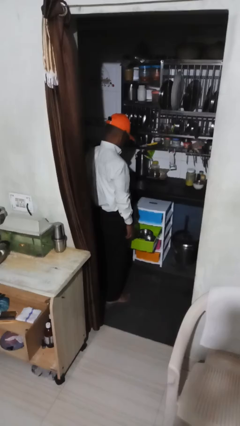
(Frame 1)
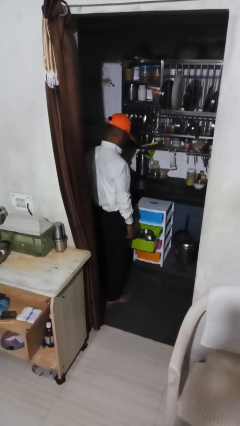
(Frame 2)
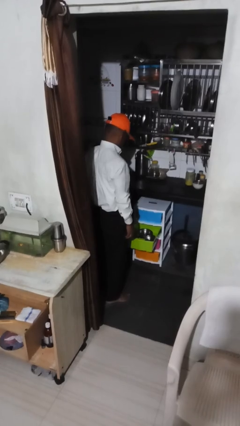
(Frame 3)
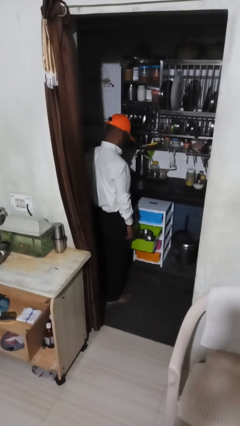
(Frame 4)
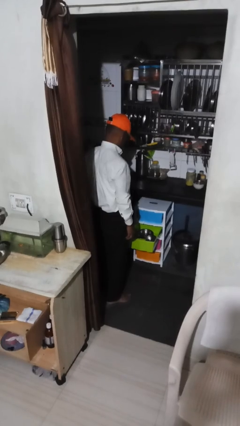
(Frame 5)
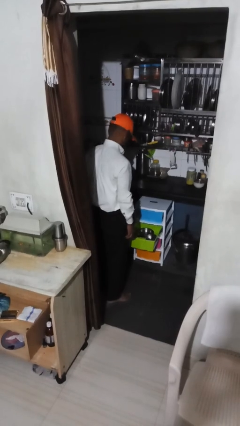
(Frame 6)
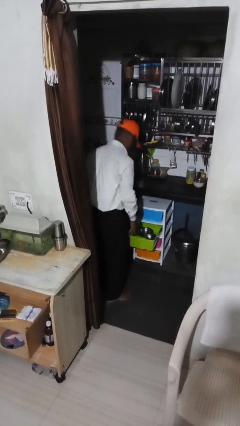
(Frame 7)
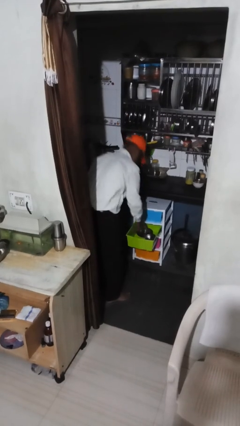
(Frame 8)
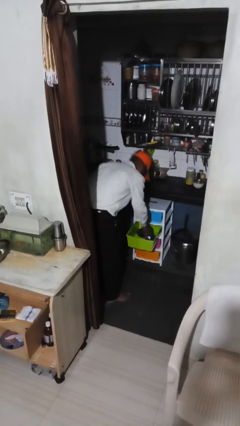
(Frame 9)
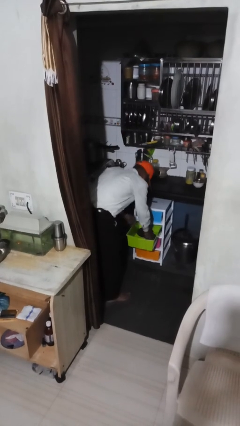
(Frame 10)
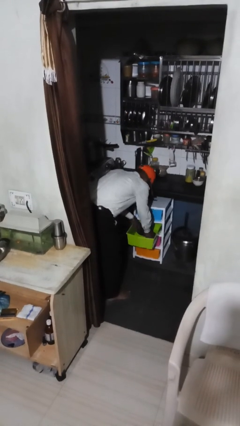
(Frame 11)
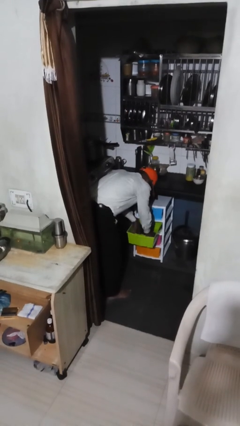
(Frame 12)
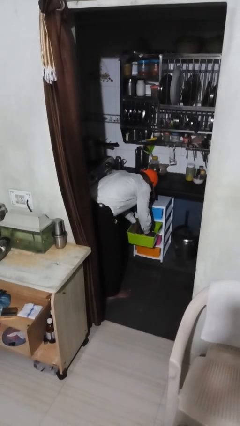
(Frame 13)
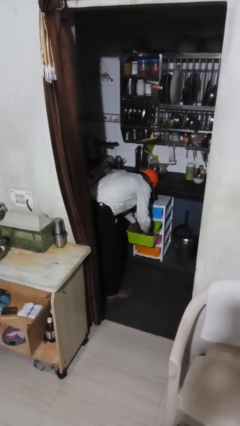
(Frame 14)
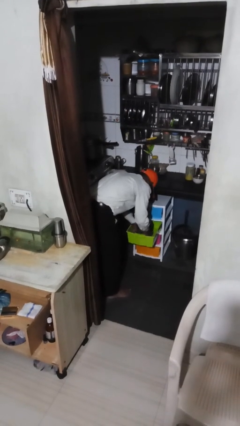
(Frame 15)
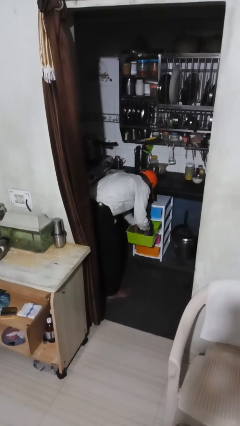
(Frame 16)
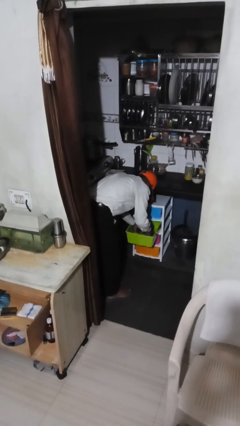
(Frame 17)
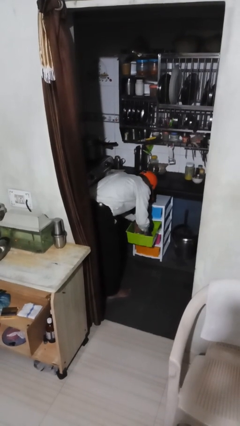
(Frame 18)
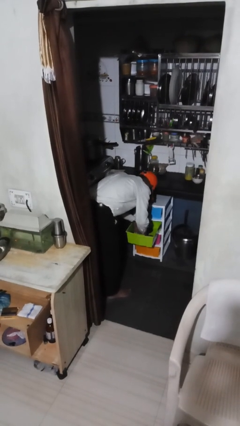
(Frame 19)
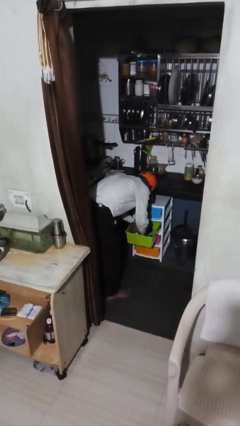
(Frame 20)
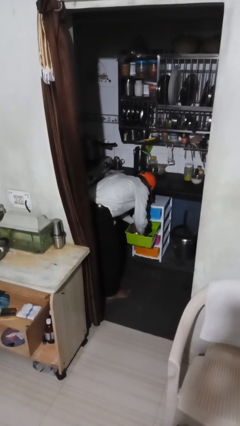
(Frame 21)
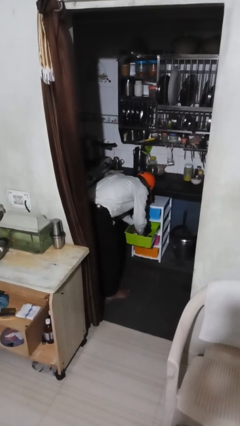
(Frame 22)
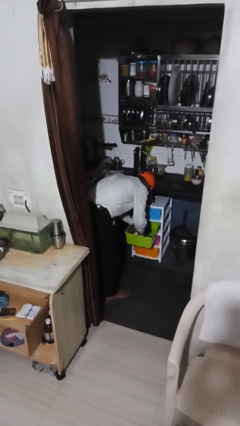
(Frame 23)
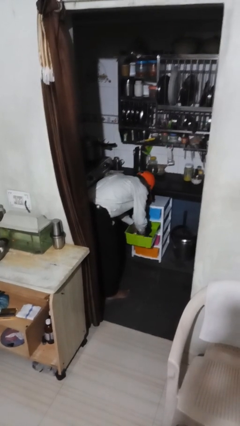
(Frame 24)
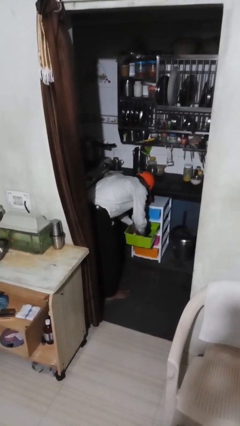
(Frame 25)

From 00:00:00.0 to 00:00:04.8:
person searches in kitchen drawer

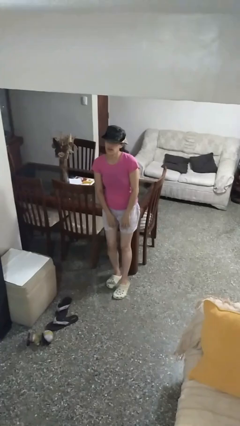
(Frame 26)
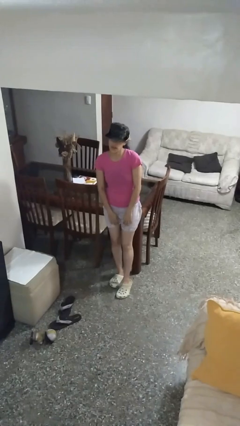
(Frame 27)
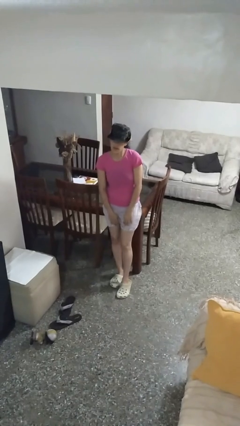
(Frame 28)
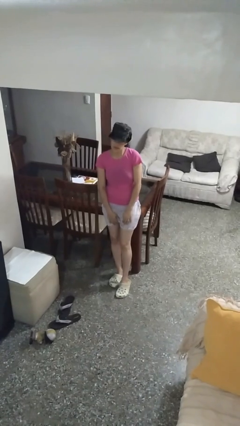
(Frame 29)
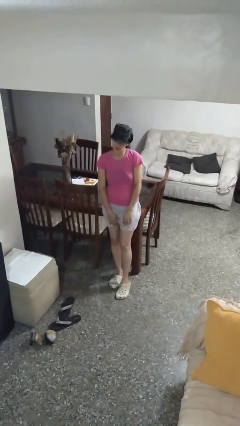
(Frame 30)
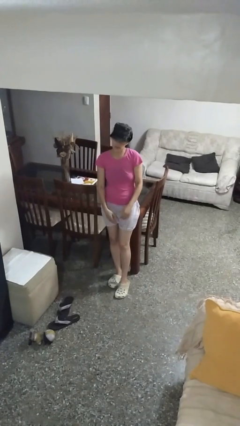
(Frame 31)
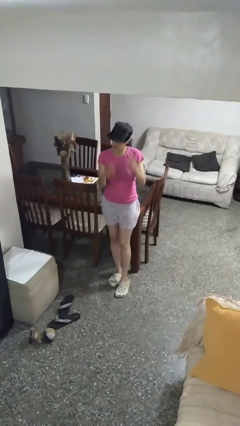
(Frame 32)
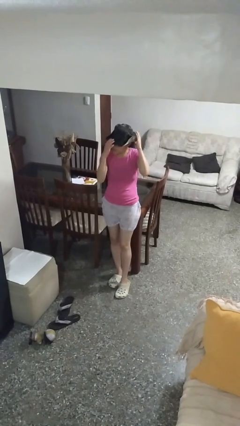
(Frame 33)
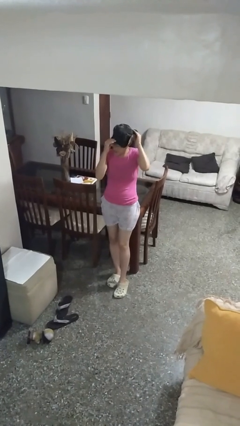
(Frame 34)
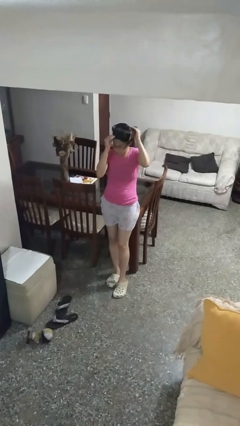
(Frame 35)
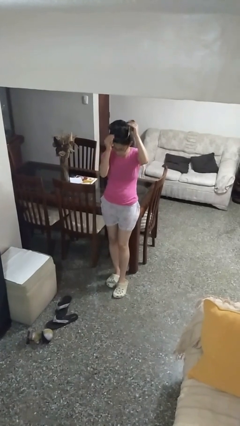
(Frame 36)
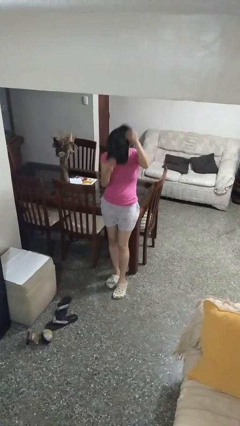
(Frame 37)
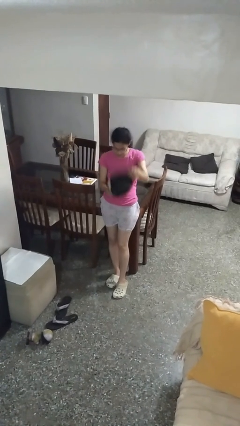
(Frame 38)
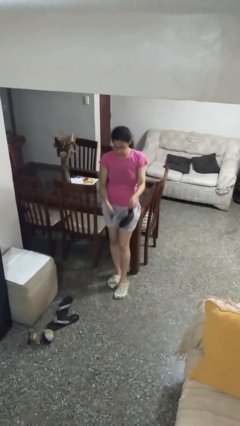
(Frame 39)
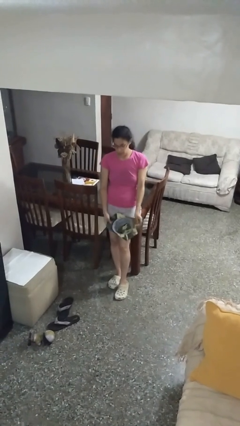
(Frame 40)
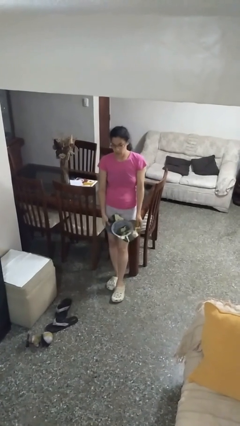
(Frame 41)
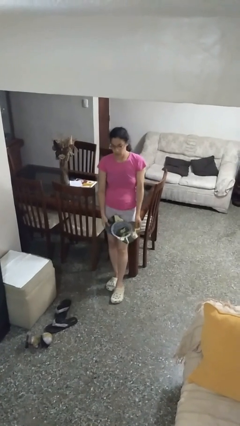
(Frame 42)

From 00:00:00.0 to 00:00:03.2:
person takes off hat

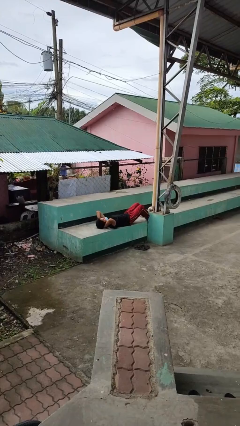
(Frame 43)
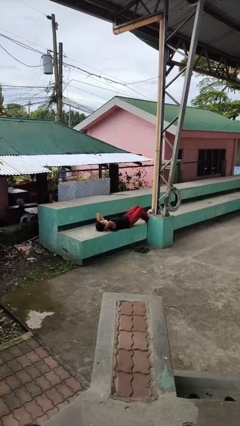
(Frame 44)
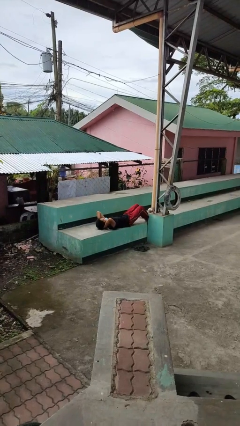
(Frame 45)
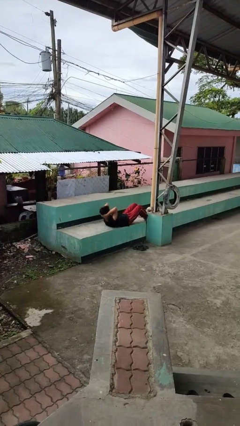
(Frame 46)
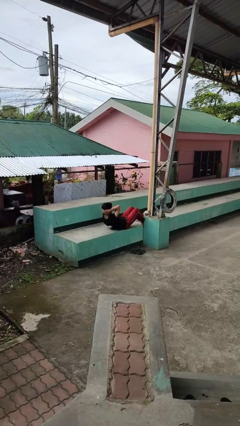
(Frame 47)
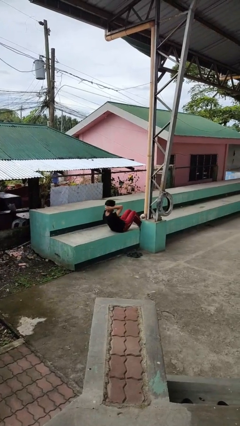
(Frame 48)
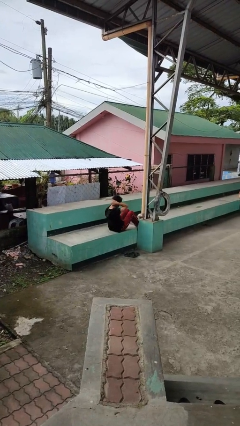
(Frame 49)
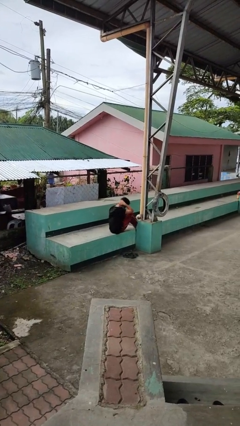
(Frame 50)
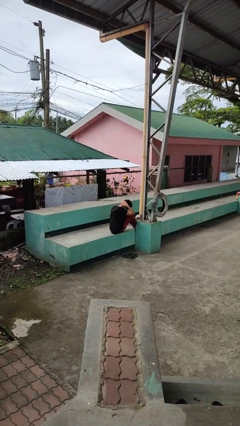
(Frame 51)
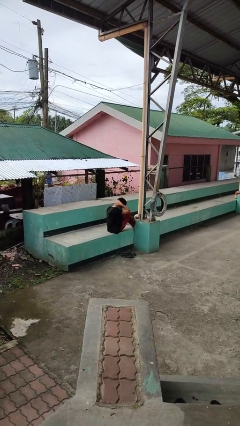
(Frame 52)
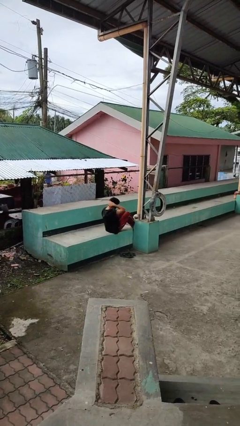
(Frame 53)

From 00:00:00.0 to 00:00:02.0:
person exercises with situp

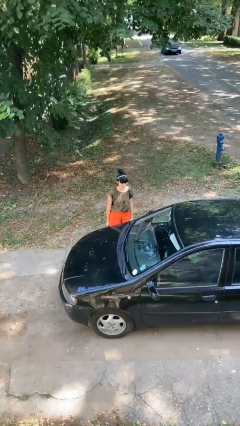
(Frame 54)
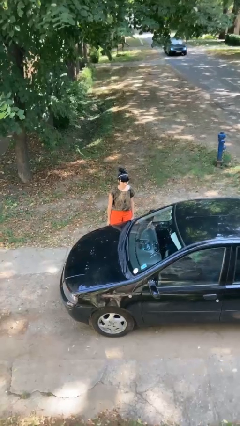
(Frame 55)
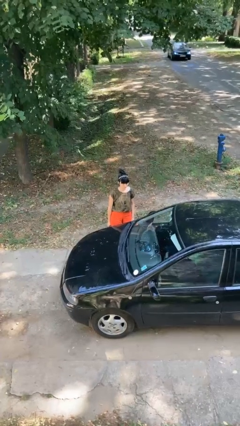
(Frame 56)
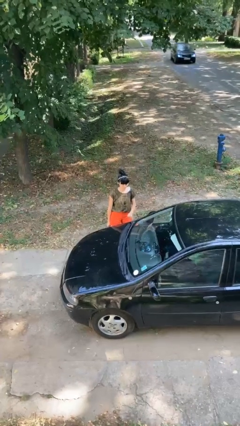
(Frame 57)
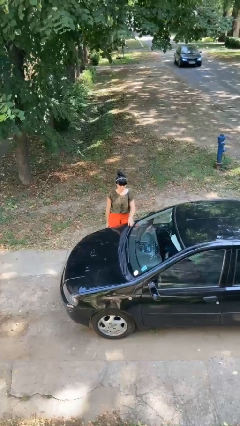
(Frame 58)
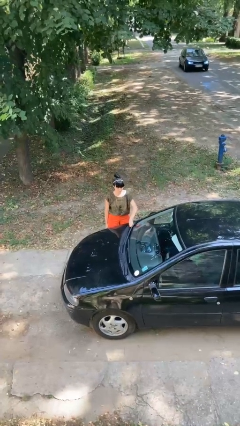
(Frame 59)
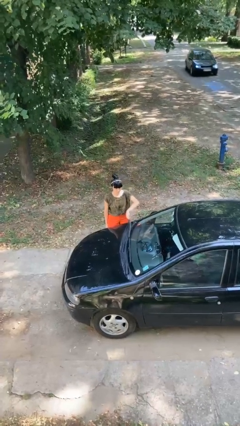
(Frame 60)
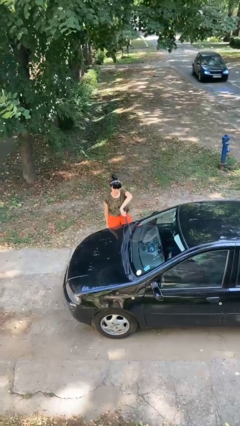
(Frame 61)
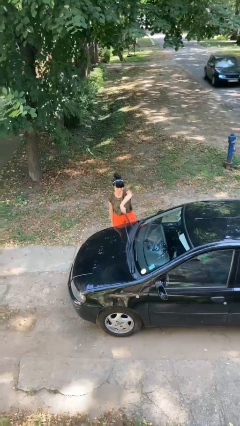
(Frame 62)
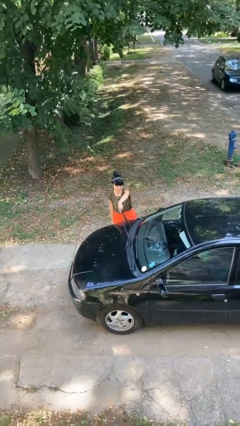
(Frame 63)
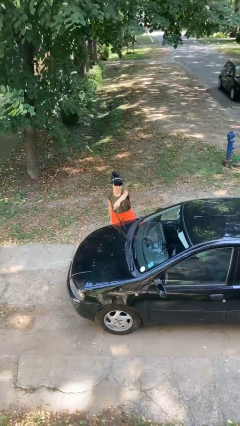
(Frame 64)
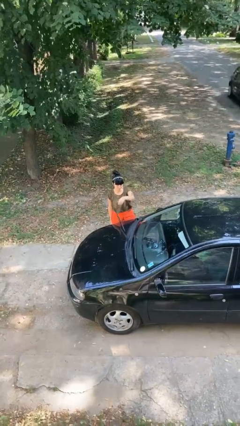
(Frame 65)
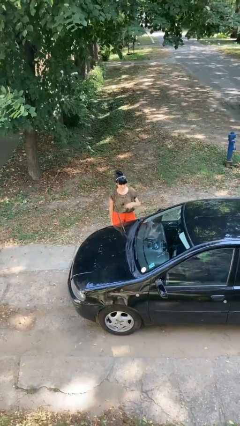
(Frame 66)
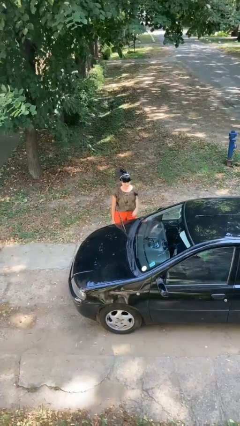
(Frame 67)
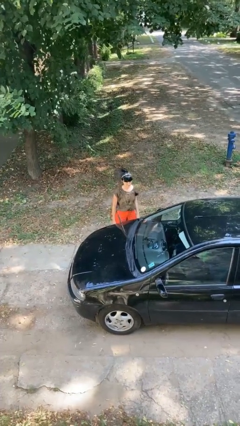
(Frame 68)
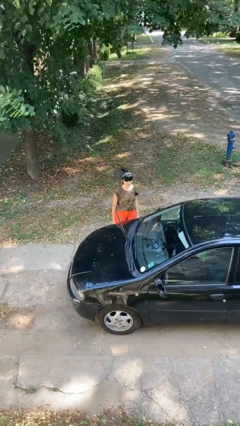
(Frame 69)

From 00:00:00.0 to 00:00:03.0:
person flips up car wipers

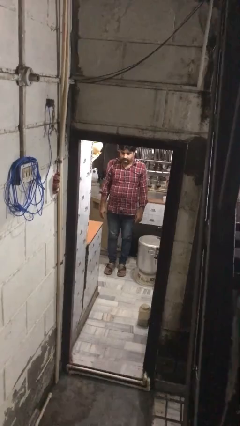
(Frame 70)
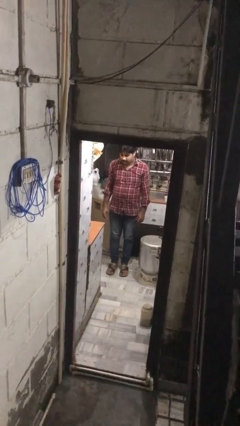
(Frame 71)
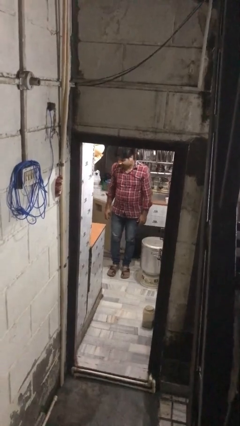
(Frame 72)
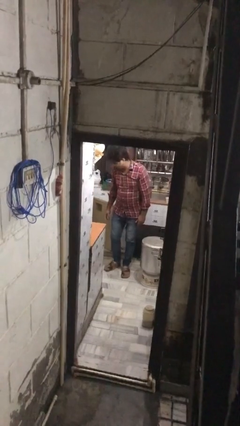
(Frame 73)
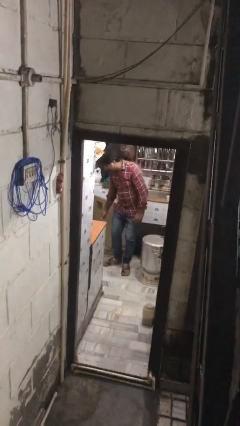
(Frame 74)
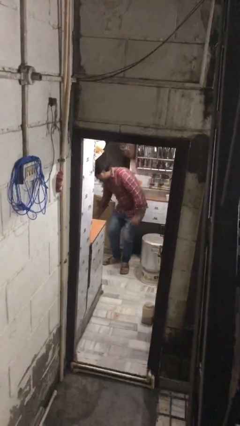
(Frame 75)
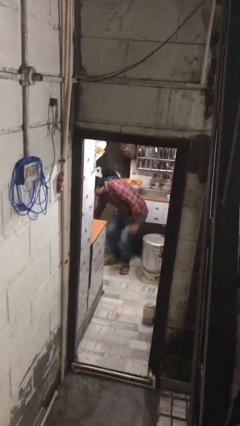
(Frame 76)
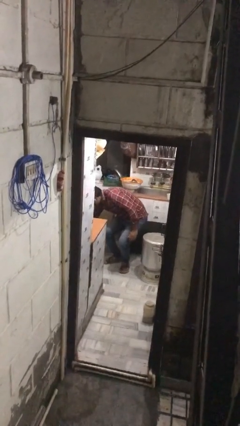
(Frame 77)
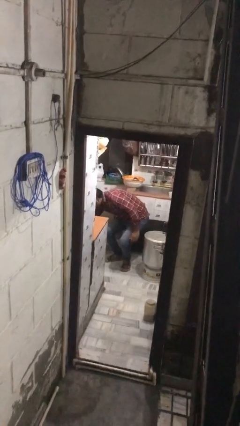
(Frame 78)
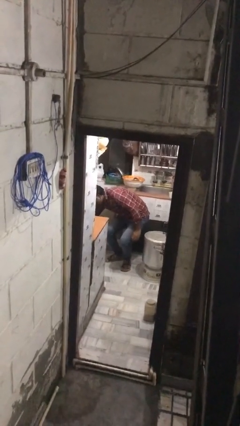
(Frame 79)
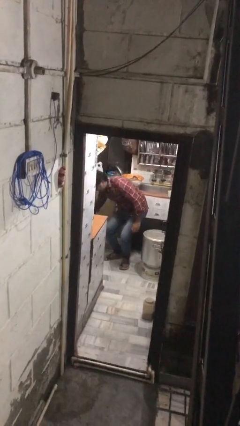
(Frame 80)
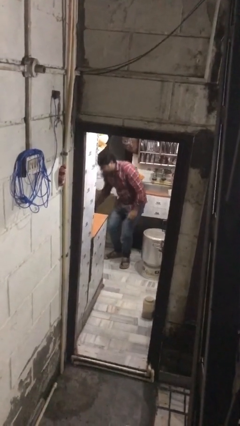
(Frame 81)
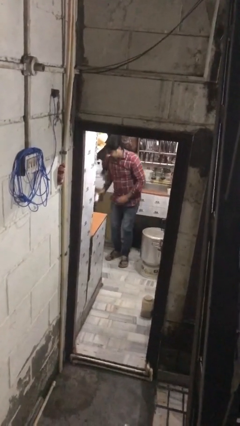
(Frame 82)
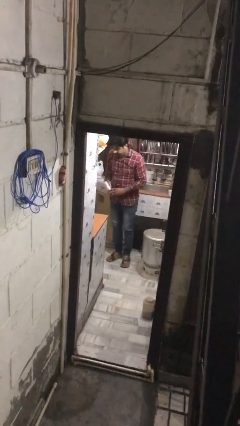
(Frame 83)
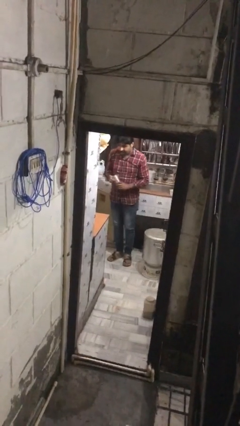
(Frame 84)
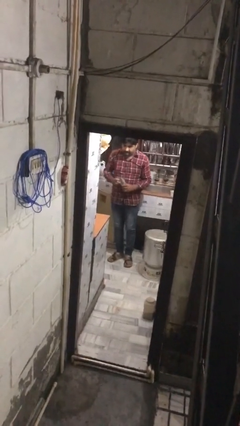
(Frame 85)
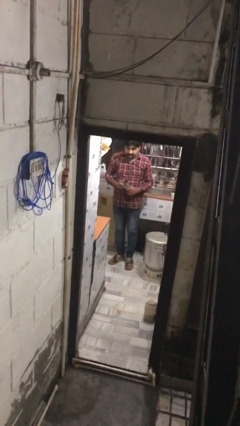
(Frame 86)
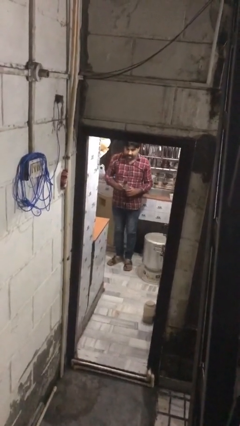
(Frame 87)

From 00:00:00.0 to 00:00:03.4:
person takes object from kitchen drawer

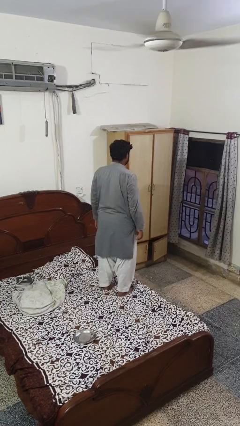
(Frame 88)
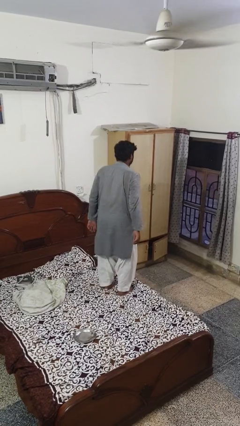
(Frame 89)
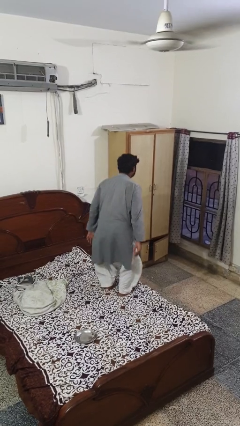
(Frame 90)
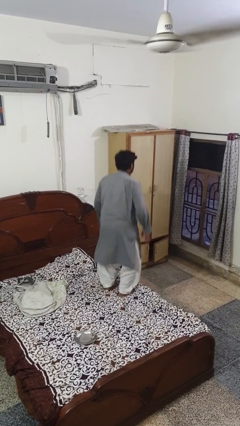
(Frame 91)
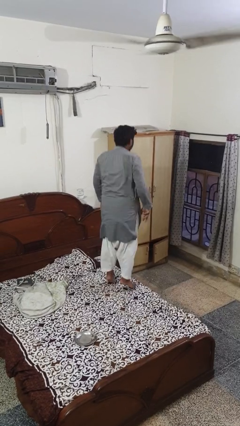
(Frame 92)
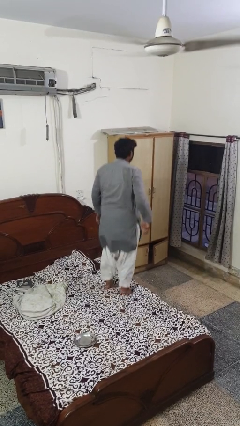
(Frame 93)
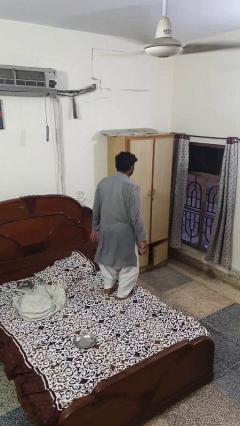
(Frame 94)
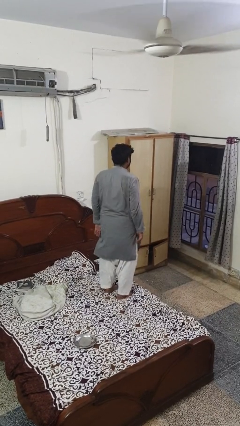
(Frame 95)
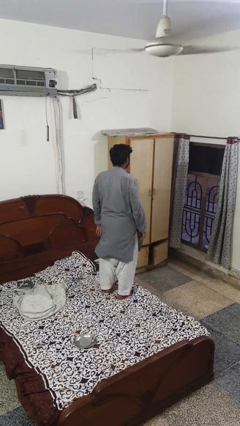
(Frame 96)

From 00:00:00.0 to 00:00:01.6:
person jumps on bed
